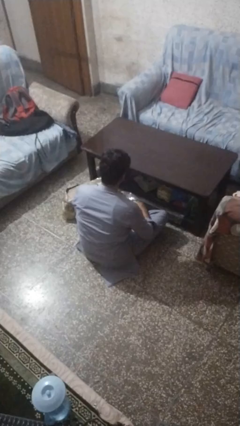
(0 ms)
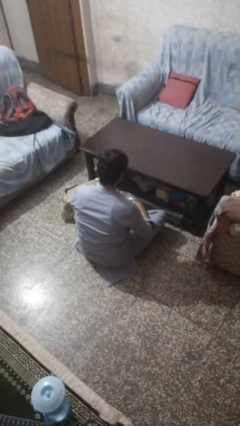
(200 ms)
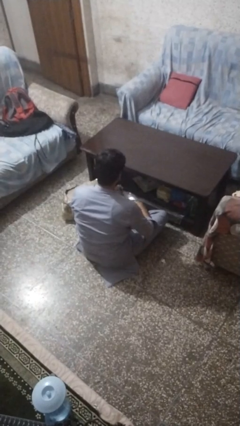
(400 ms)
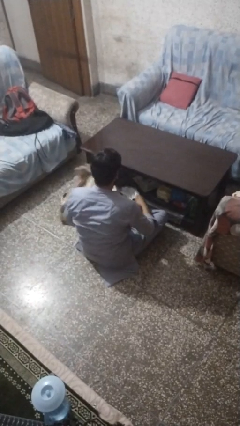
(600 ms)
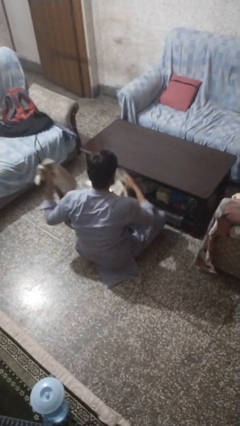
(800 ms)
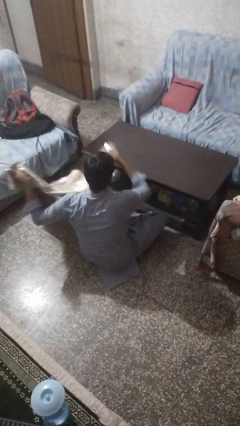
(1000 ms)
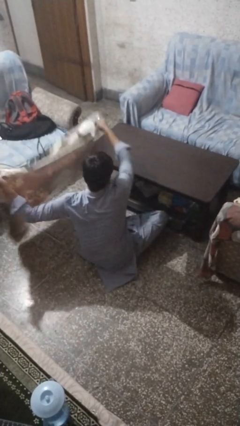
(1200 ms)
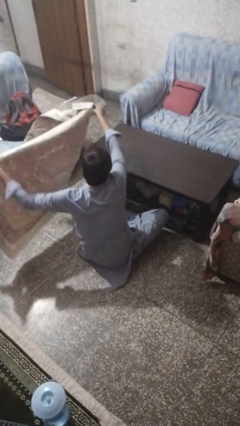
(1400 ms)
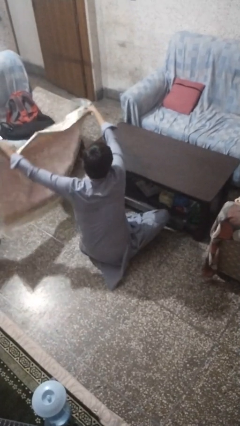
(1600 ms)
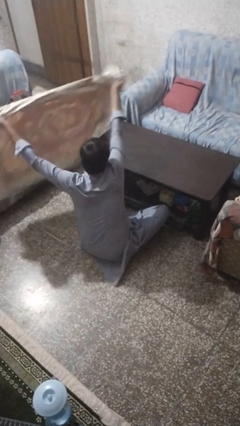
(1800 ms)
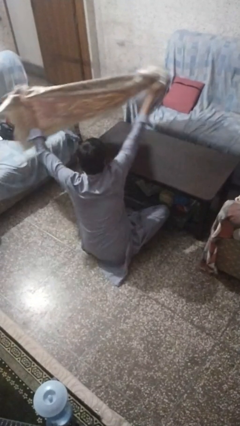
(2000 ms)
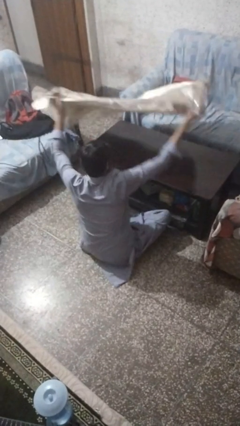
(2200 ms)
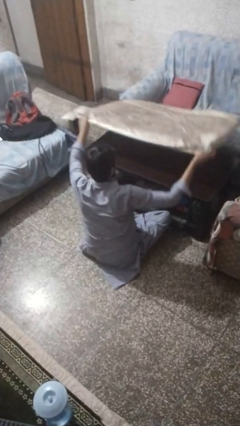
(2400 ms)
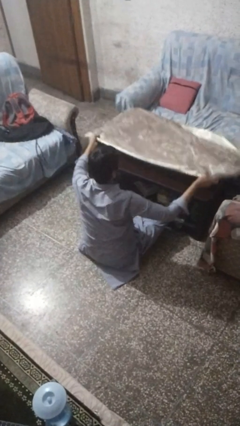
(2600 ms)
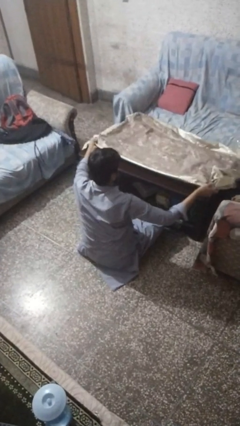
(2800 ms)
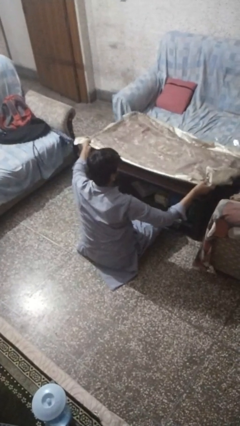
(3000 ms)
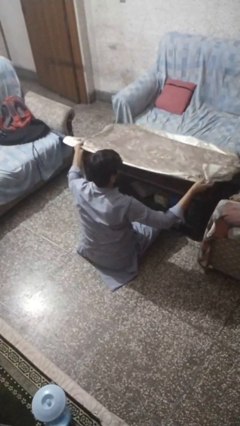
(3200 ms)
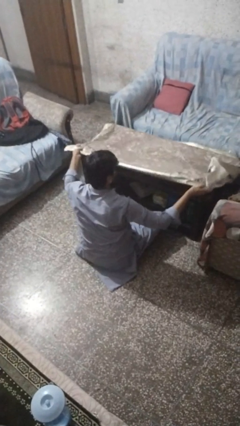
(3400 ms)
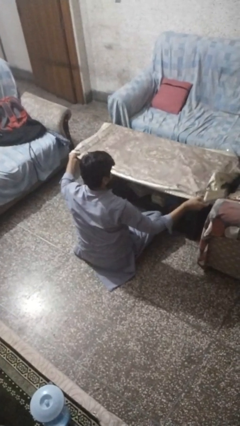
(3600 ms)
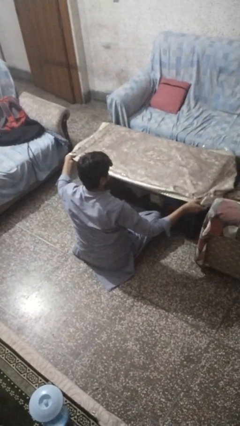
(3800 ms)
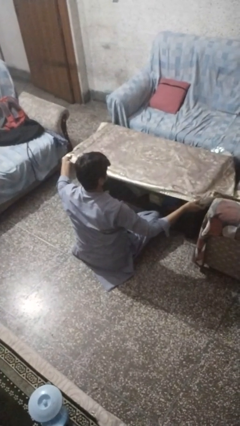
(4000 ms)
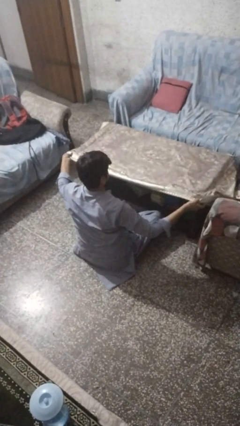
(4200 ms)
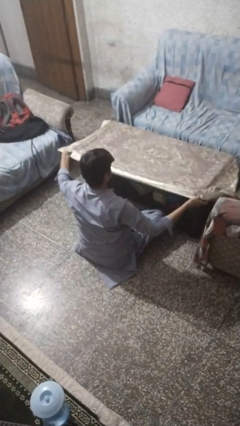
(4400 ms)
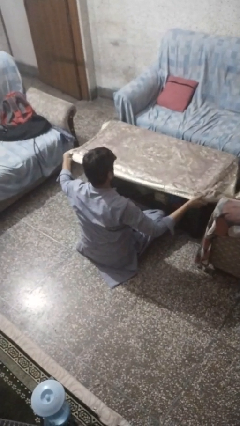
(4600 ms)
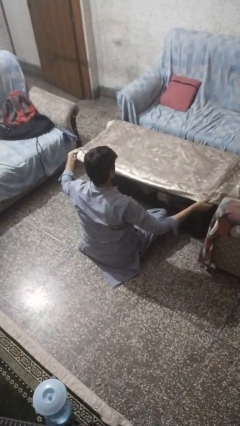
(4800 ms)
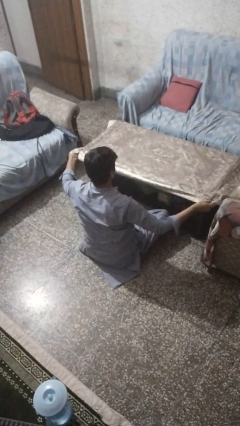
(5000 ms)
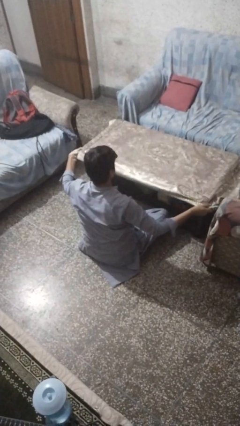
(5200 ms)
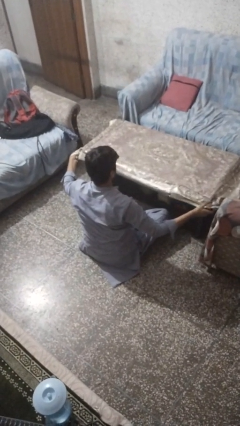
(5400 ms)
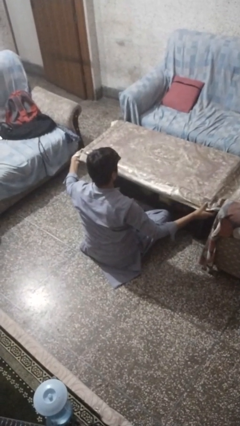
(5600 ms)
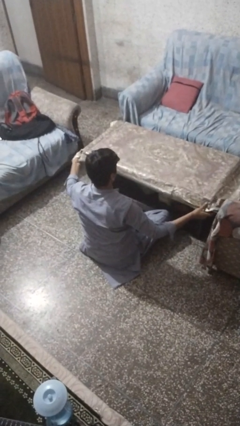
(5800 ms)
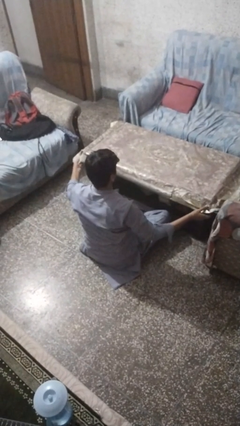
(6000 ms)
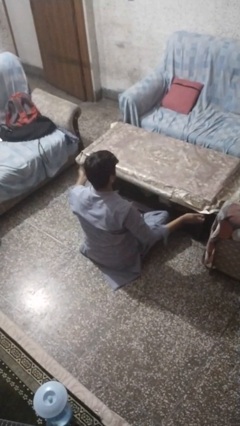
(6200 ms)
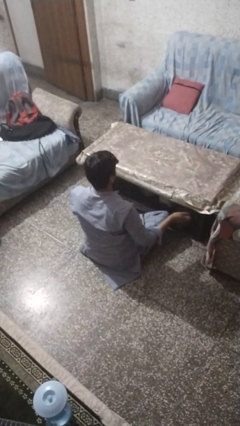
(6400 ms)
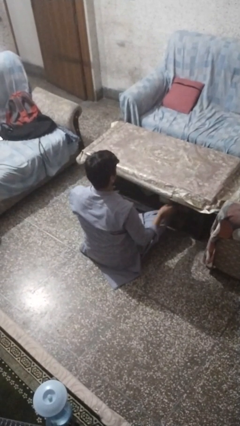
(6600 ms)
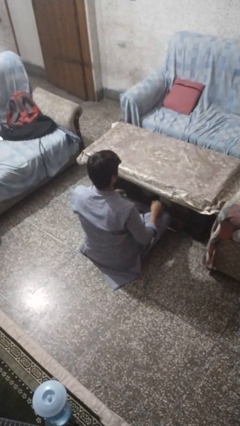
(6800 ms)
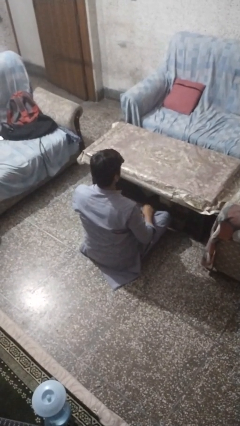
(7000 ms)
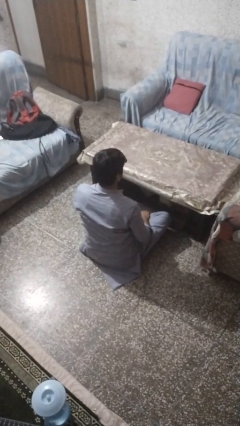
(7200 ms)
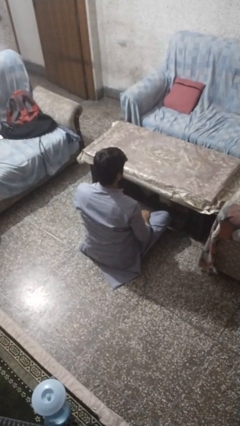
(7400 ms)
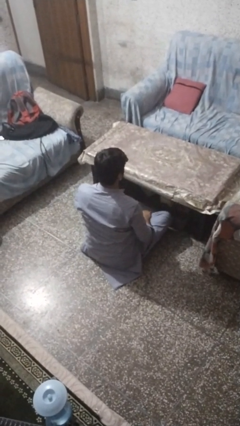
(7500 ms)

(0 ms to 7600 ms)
person spreads tablecloth

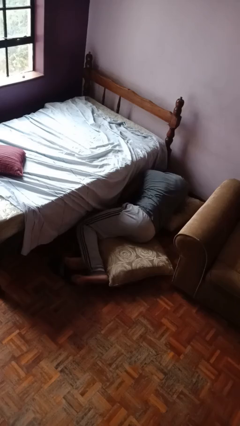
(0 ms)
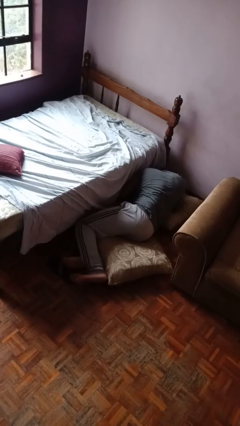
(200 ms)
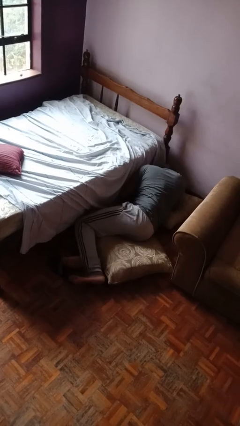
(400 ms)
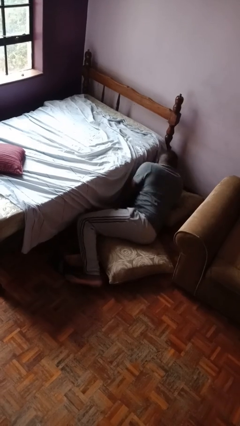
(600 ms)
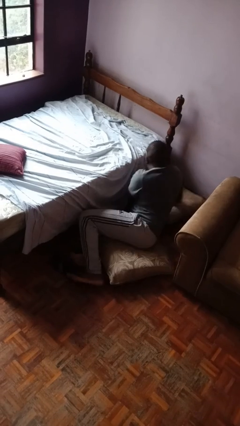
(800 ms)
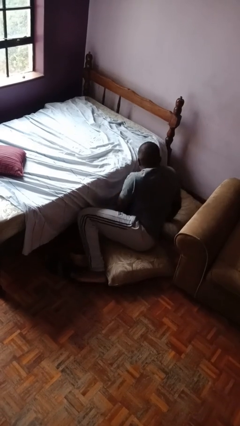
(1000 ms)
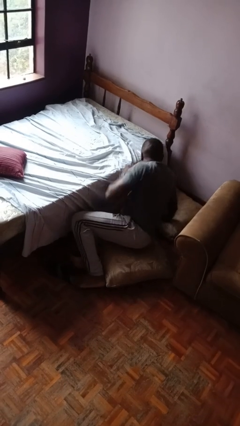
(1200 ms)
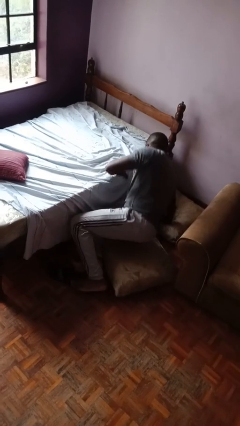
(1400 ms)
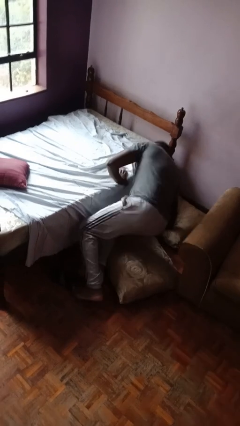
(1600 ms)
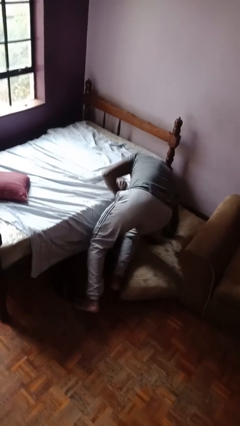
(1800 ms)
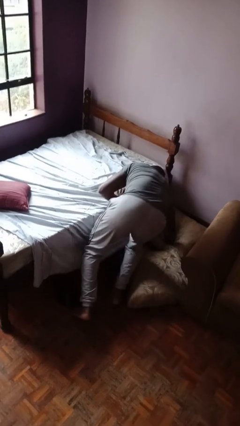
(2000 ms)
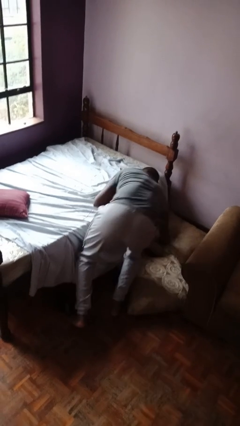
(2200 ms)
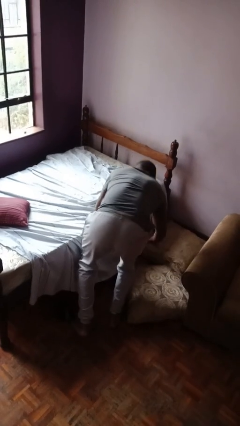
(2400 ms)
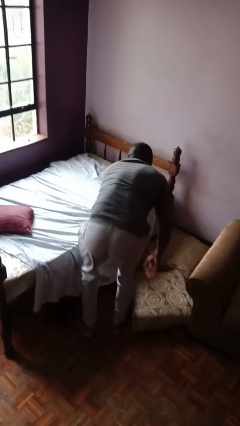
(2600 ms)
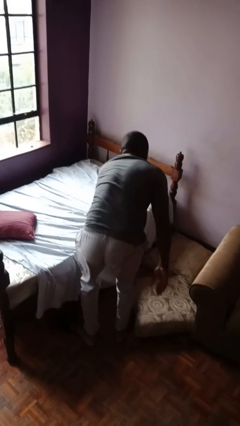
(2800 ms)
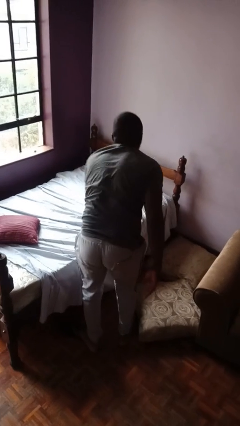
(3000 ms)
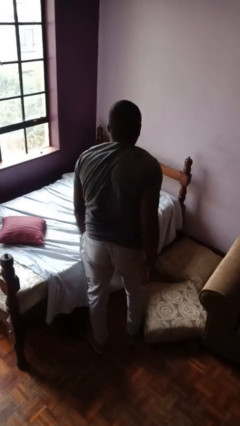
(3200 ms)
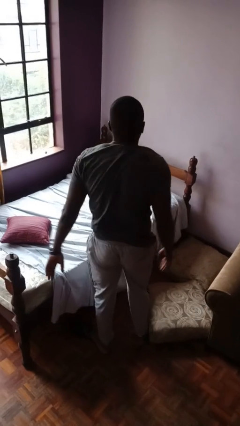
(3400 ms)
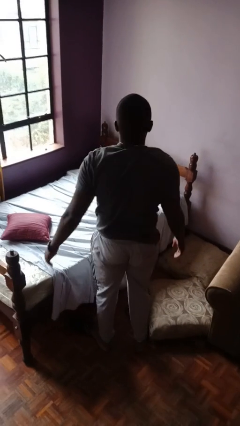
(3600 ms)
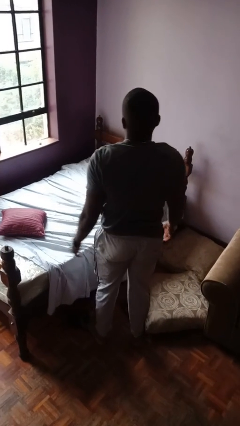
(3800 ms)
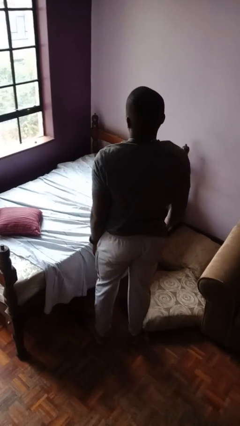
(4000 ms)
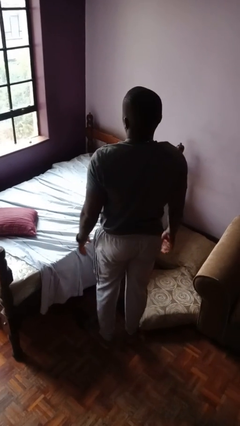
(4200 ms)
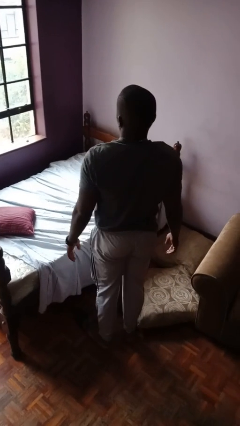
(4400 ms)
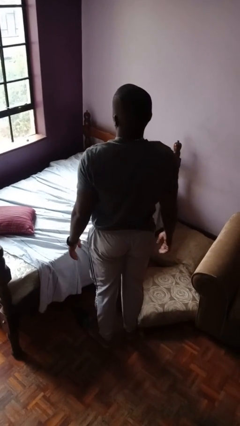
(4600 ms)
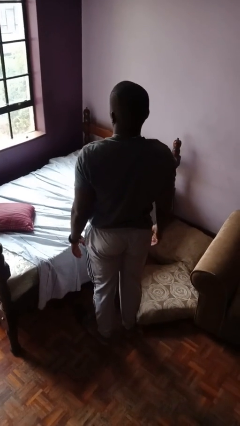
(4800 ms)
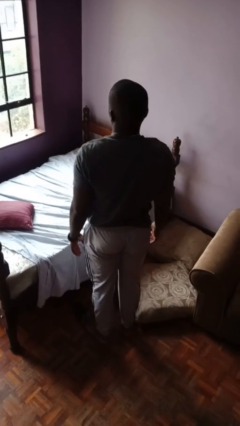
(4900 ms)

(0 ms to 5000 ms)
person stands up from floor

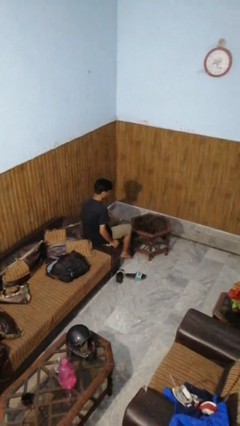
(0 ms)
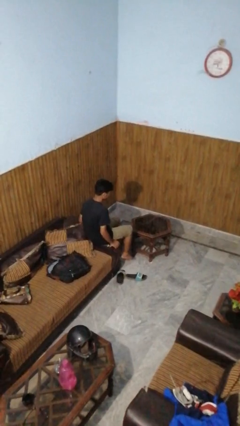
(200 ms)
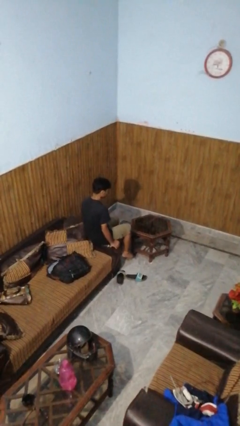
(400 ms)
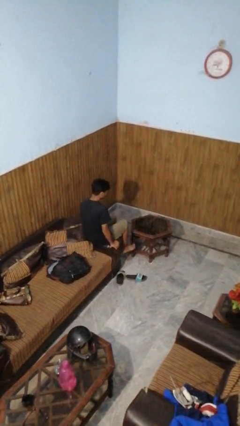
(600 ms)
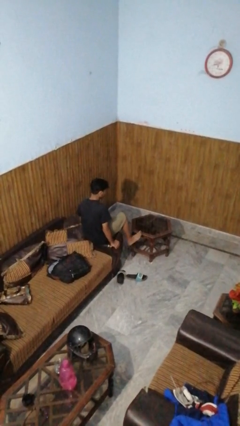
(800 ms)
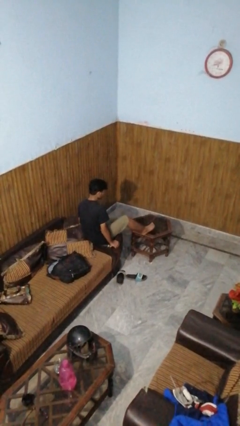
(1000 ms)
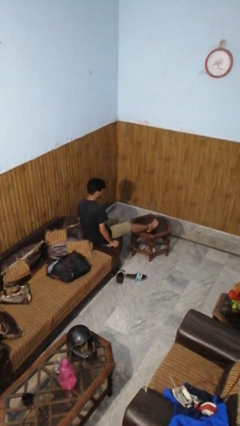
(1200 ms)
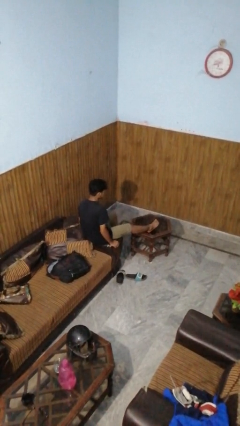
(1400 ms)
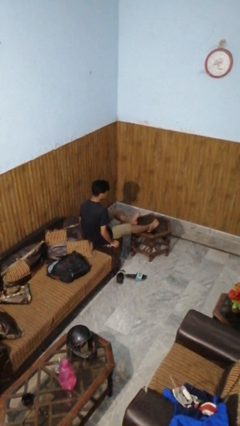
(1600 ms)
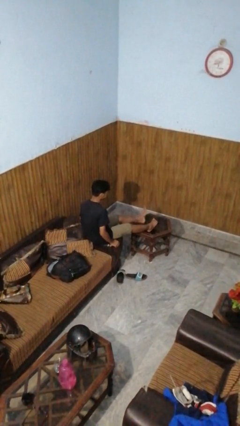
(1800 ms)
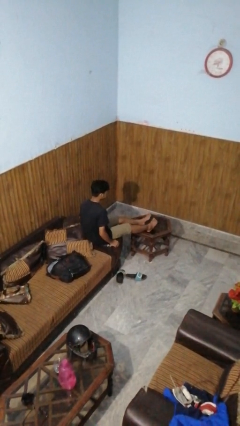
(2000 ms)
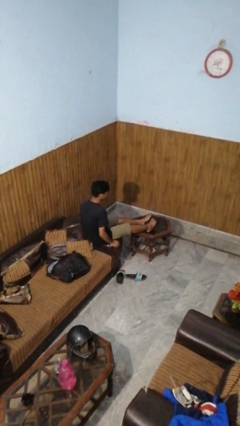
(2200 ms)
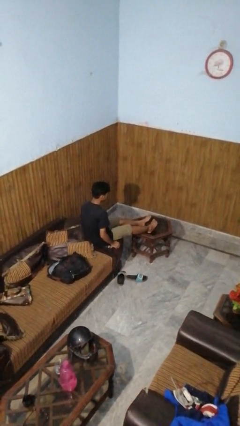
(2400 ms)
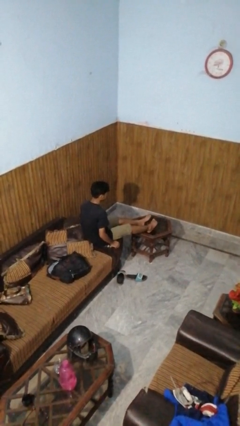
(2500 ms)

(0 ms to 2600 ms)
person puts feet up

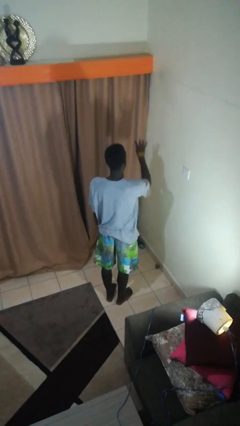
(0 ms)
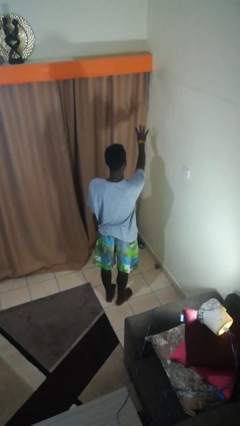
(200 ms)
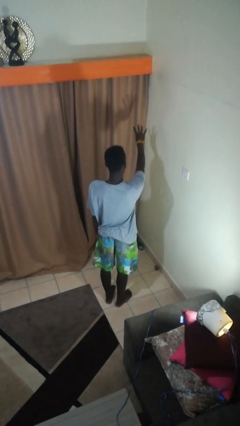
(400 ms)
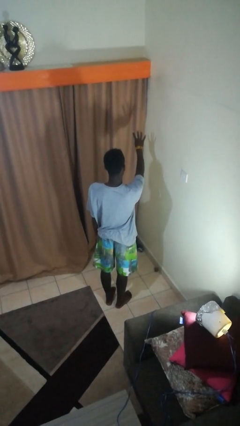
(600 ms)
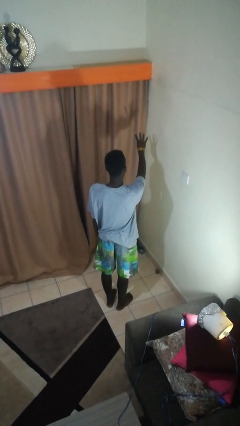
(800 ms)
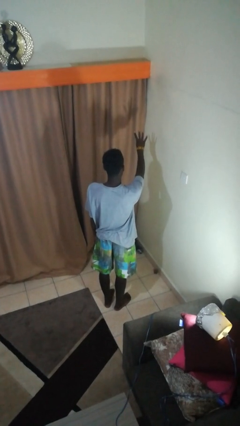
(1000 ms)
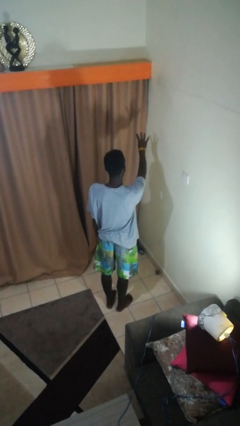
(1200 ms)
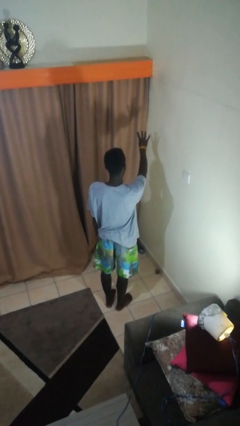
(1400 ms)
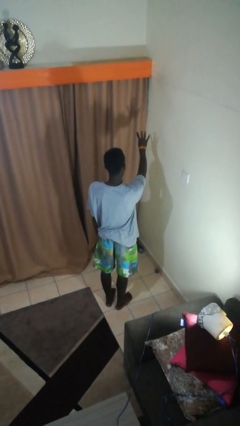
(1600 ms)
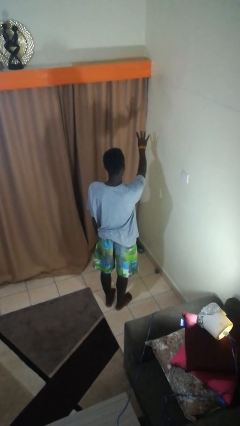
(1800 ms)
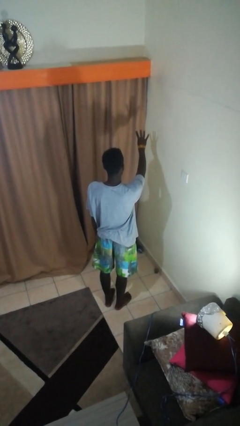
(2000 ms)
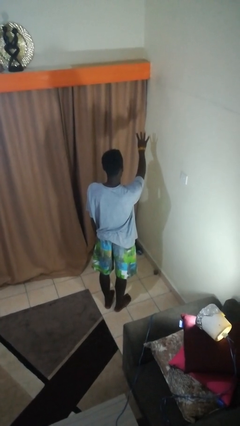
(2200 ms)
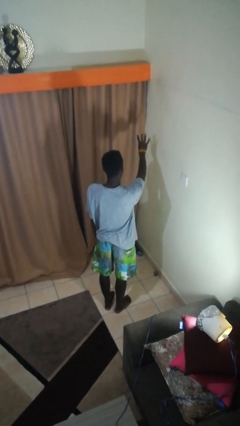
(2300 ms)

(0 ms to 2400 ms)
person gestures number four

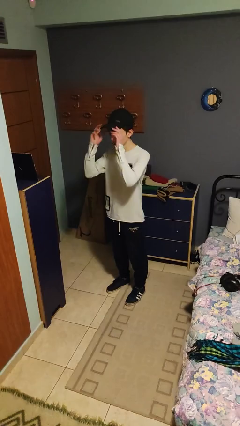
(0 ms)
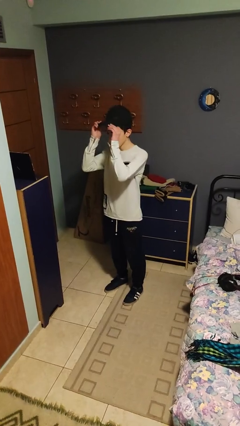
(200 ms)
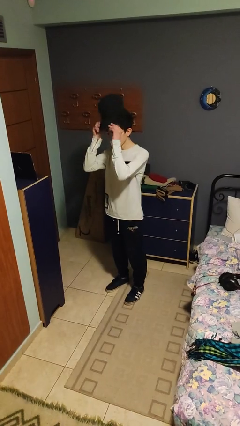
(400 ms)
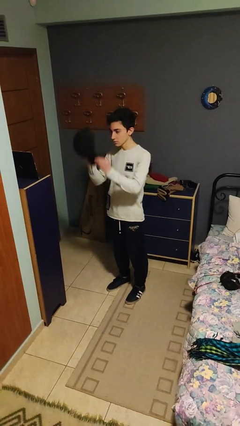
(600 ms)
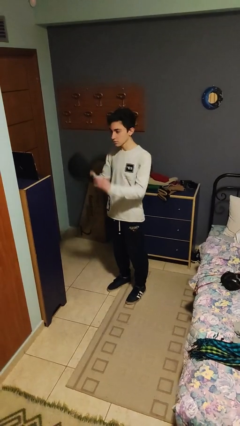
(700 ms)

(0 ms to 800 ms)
person takes off hat
